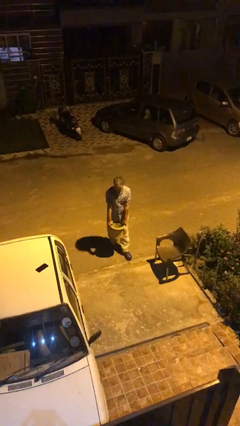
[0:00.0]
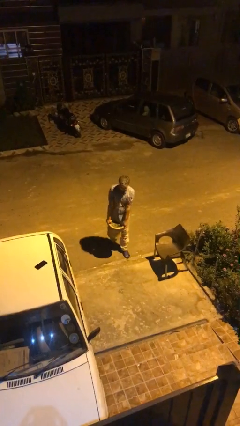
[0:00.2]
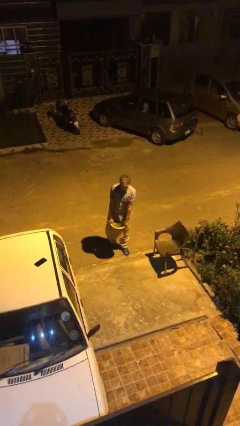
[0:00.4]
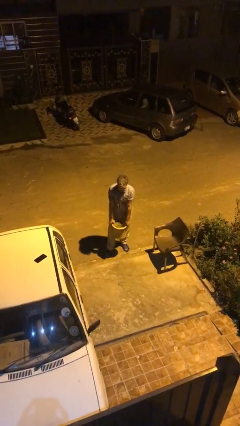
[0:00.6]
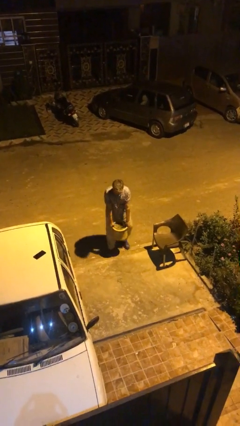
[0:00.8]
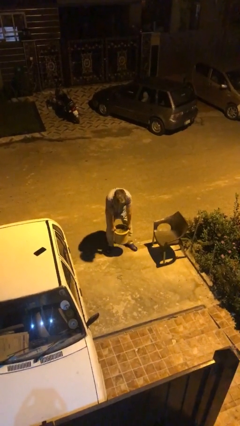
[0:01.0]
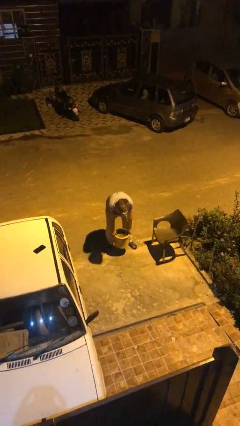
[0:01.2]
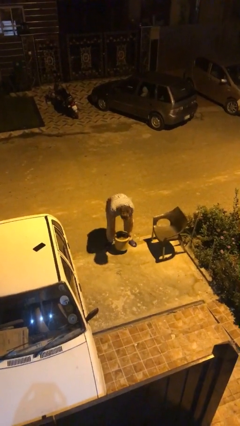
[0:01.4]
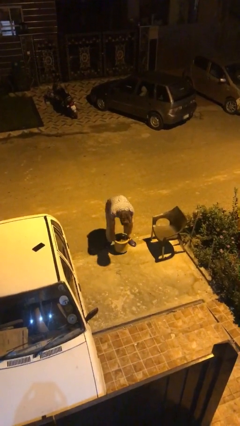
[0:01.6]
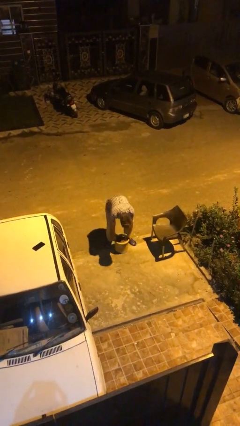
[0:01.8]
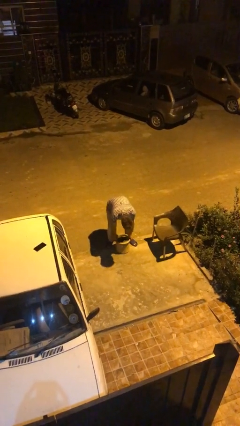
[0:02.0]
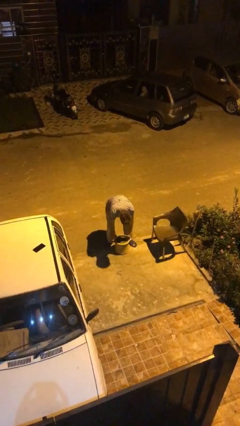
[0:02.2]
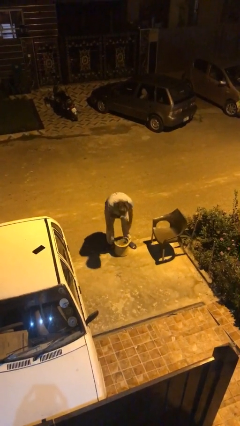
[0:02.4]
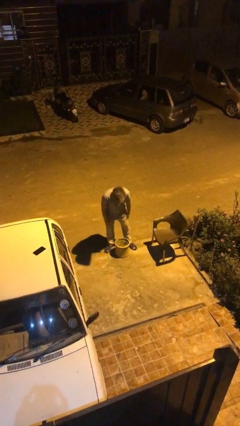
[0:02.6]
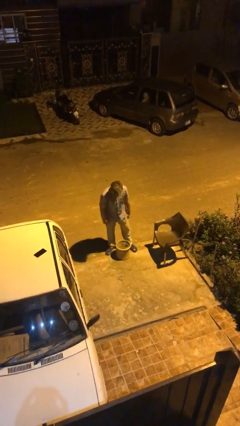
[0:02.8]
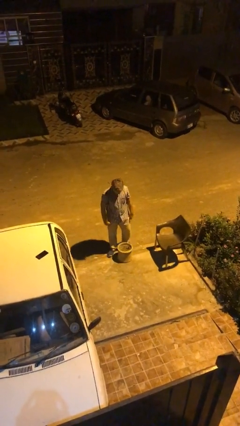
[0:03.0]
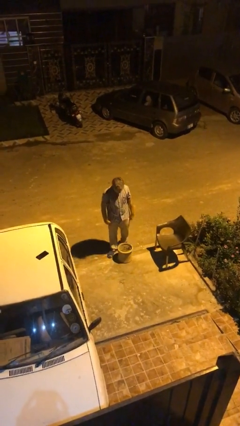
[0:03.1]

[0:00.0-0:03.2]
person puts down object on floor

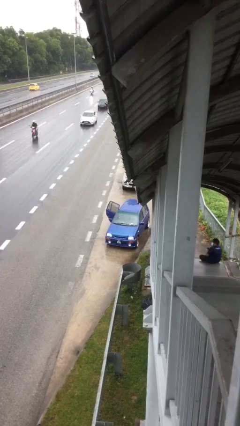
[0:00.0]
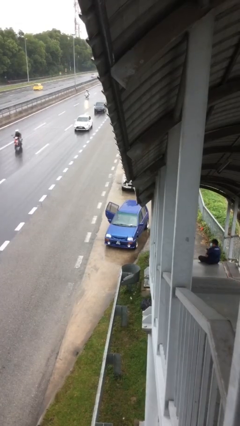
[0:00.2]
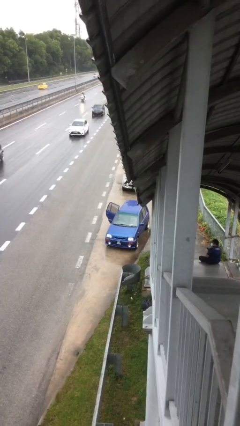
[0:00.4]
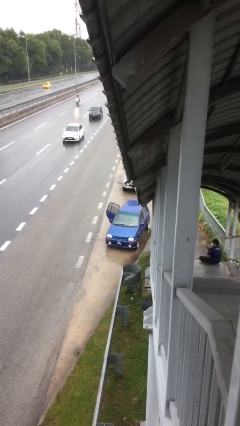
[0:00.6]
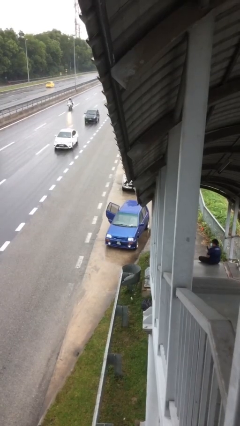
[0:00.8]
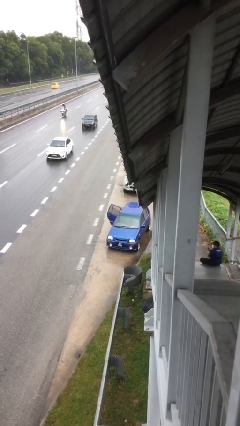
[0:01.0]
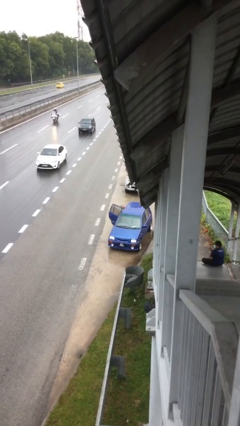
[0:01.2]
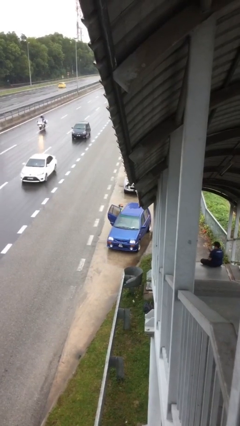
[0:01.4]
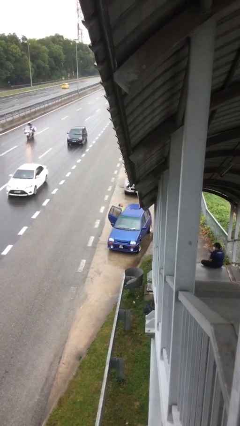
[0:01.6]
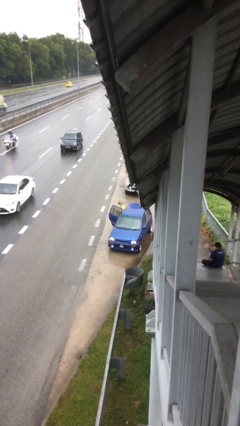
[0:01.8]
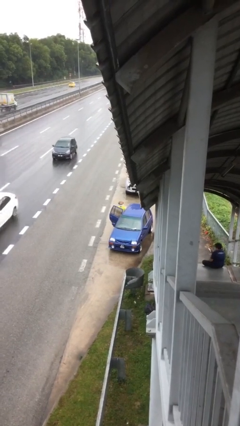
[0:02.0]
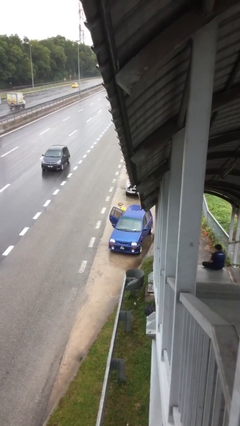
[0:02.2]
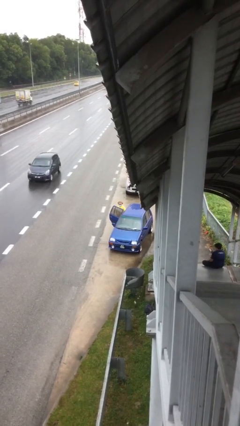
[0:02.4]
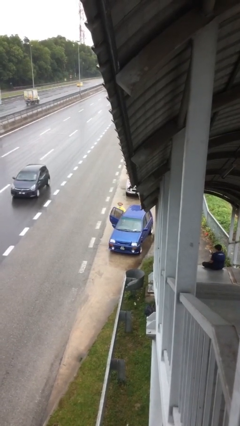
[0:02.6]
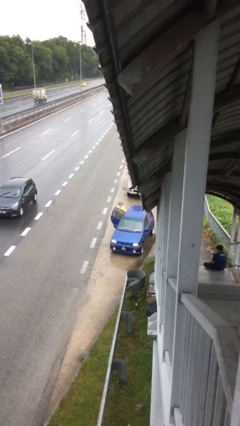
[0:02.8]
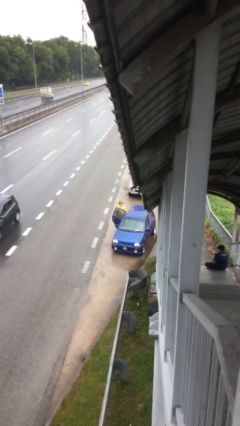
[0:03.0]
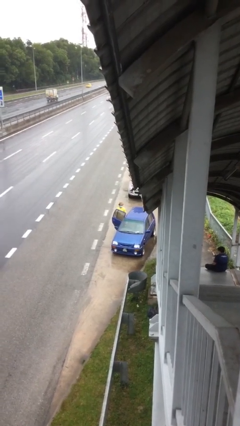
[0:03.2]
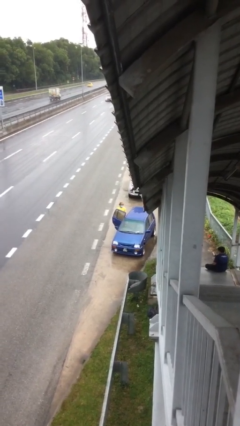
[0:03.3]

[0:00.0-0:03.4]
person exits car

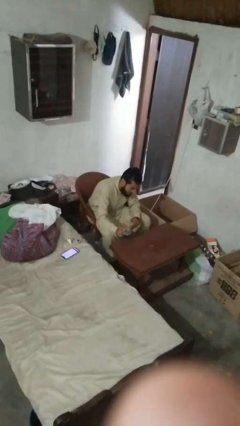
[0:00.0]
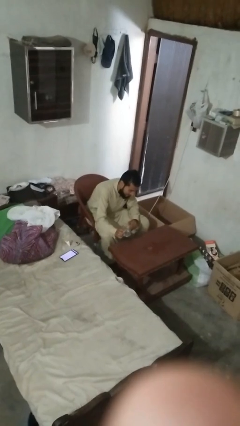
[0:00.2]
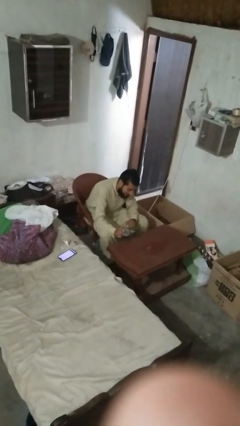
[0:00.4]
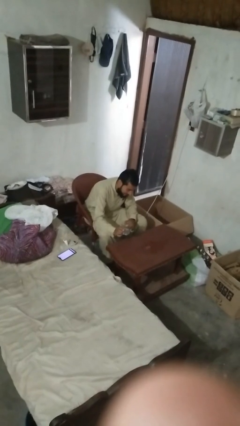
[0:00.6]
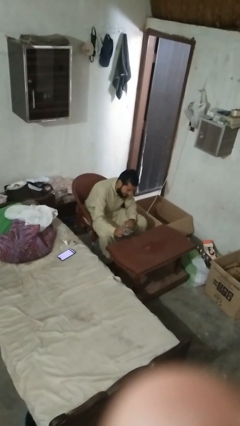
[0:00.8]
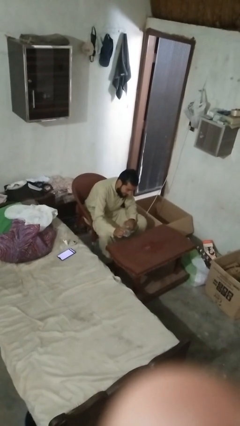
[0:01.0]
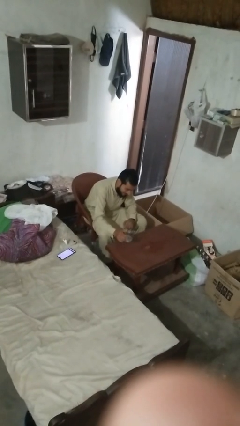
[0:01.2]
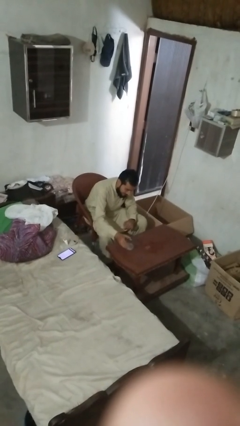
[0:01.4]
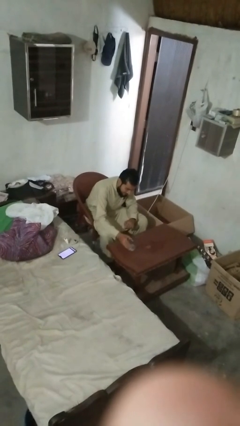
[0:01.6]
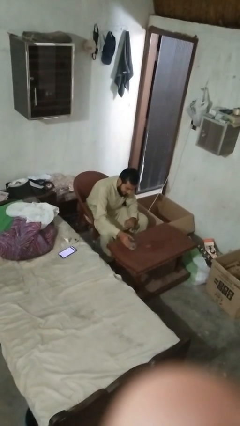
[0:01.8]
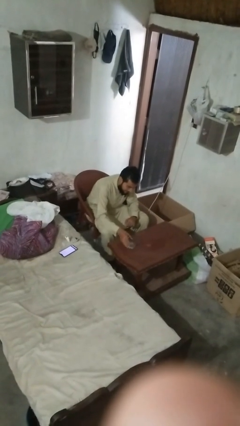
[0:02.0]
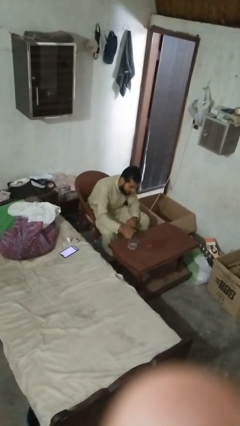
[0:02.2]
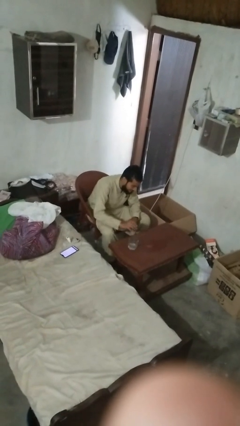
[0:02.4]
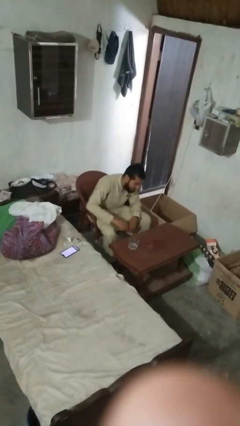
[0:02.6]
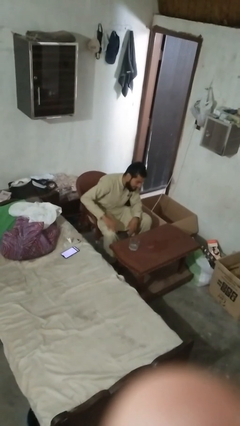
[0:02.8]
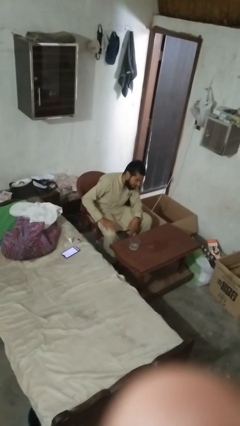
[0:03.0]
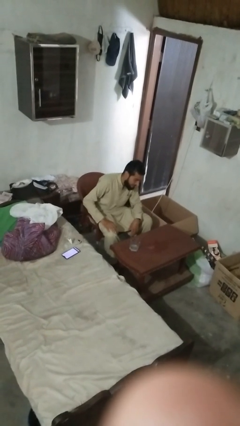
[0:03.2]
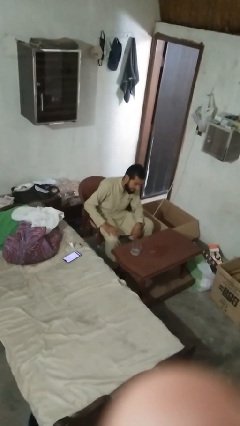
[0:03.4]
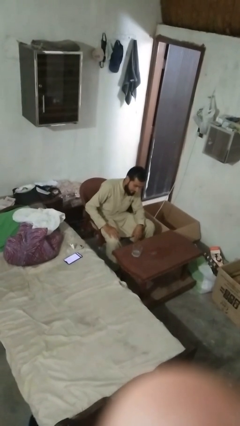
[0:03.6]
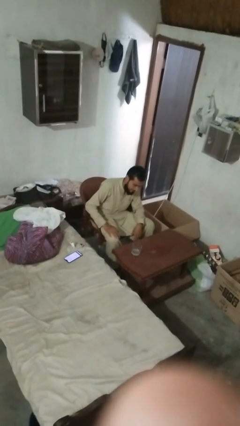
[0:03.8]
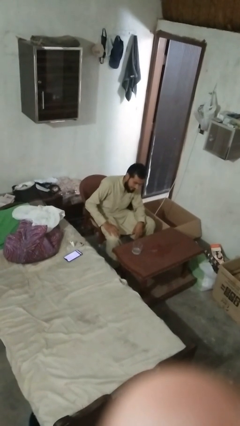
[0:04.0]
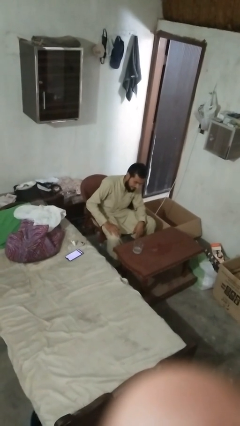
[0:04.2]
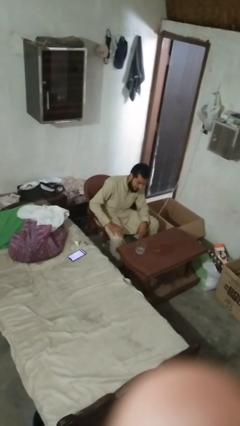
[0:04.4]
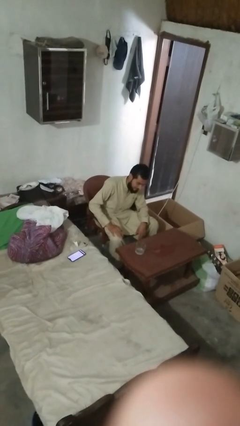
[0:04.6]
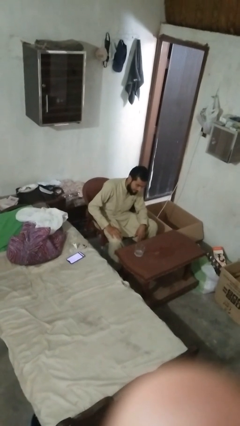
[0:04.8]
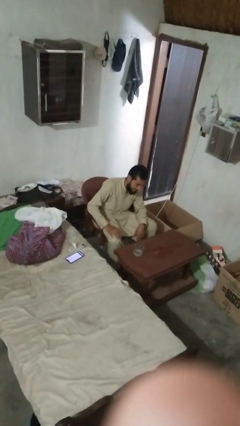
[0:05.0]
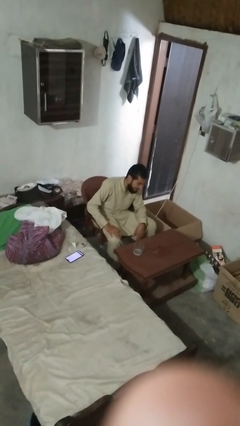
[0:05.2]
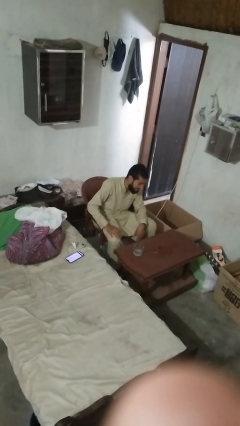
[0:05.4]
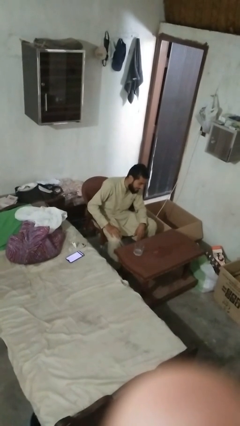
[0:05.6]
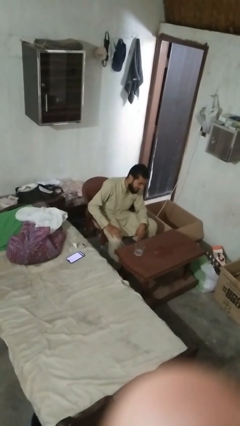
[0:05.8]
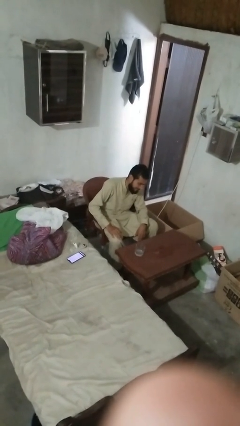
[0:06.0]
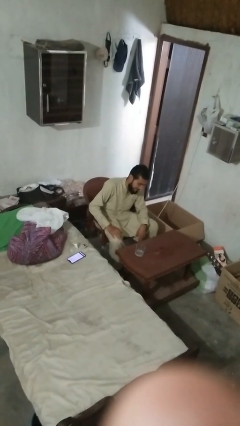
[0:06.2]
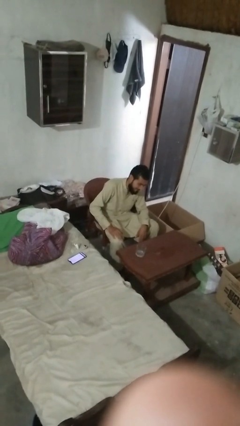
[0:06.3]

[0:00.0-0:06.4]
person sets upright glass

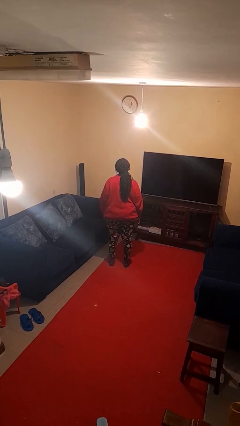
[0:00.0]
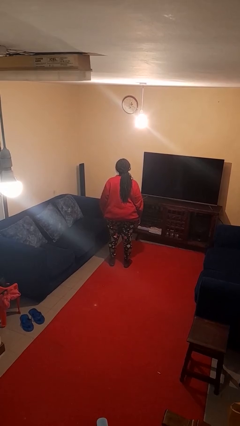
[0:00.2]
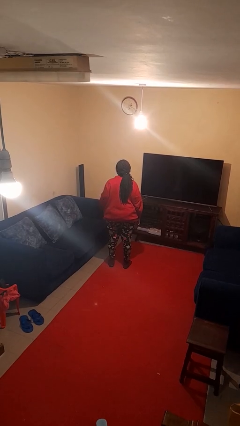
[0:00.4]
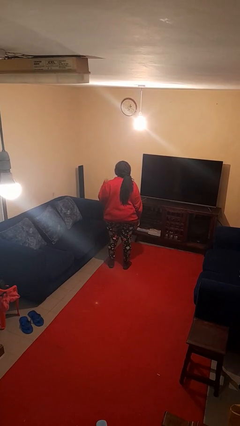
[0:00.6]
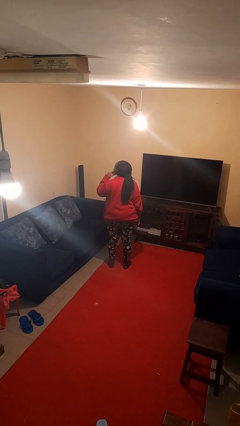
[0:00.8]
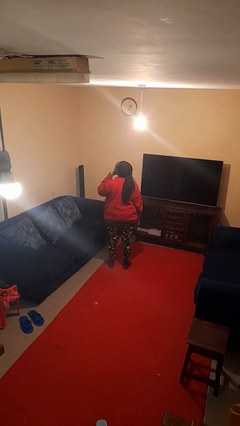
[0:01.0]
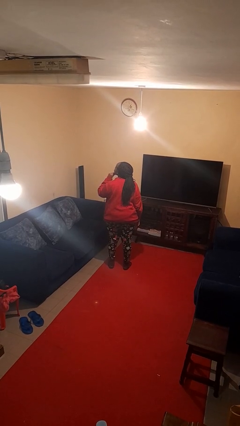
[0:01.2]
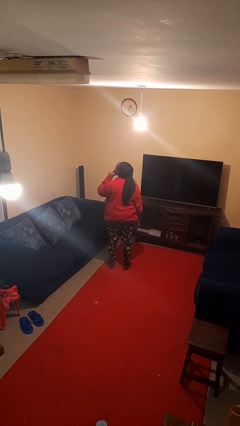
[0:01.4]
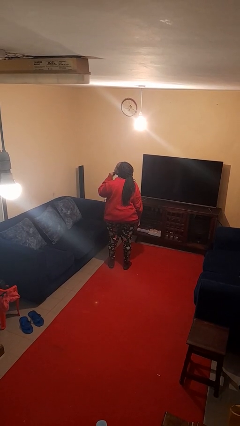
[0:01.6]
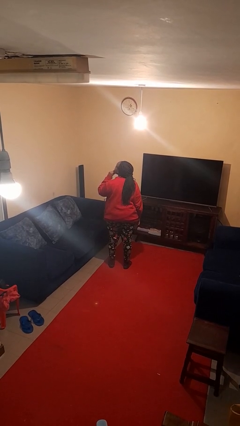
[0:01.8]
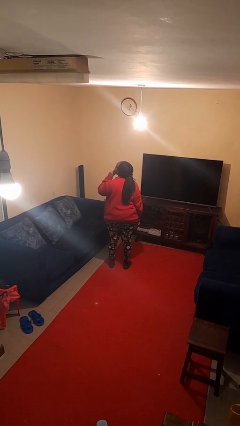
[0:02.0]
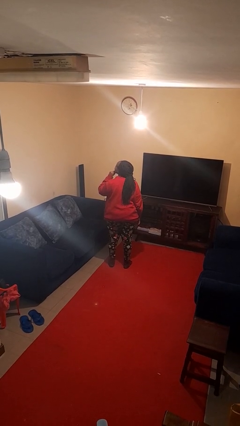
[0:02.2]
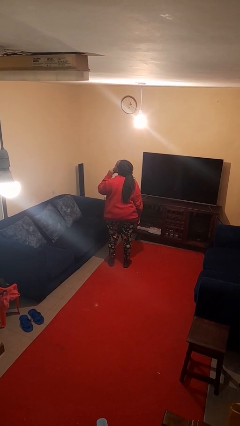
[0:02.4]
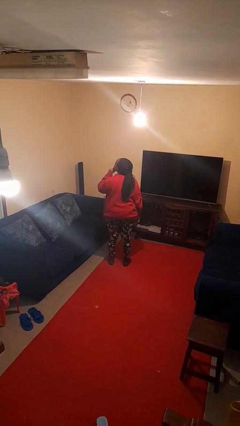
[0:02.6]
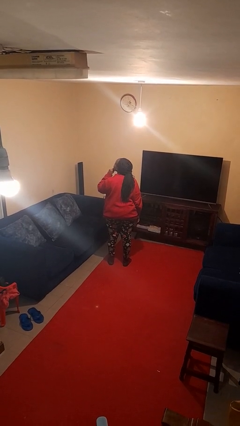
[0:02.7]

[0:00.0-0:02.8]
person strokes chin

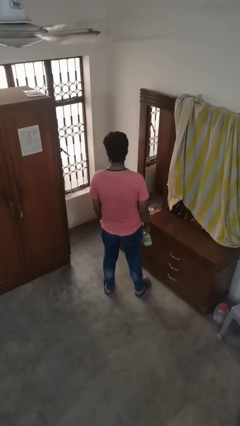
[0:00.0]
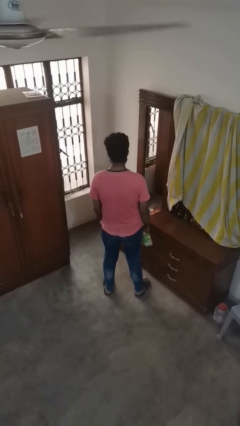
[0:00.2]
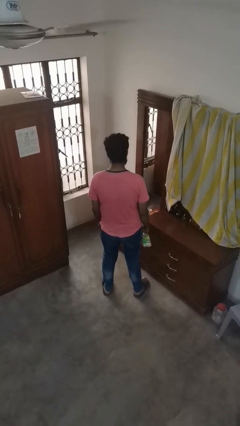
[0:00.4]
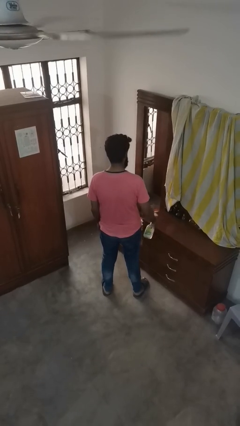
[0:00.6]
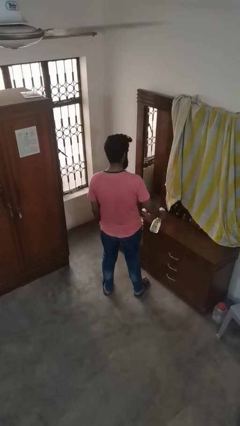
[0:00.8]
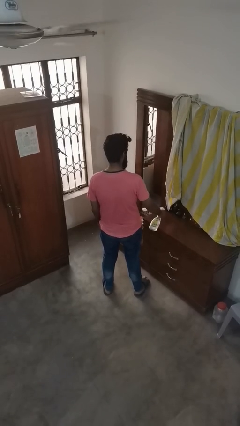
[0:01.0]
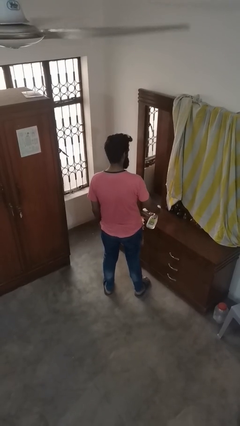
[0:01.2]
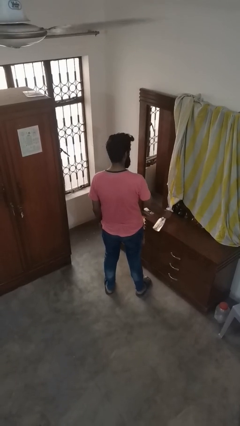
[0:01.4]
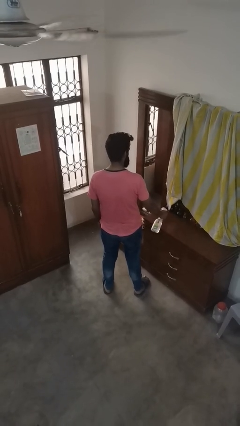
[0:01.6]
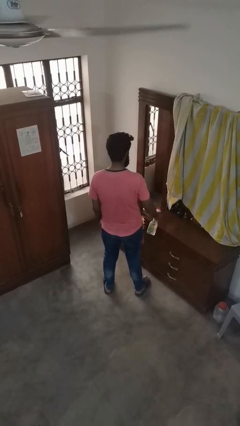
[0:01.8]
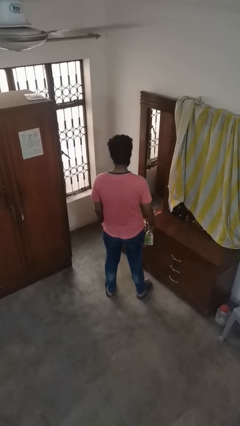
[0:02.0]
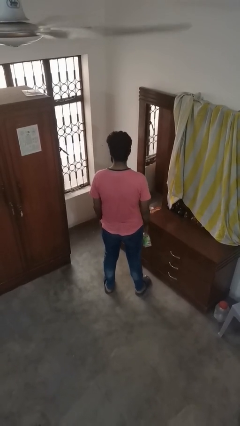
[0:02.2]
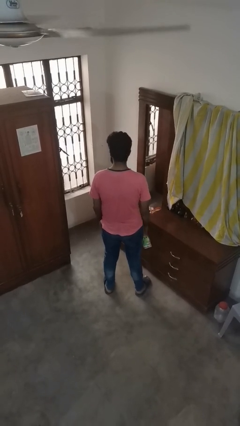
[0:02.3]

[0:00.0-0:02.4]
person sprays from bottle
